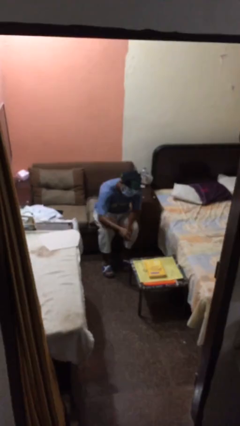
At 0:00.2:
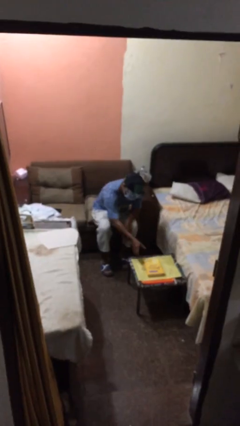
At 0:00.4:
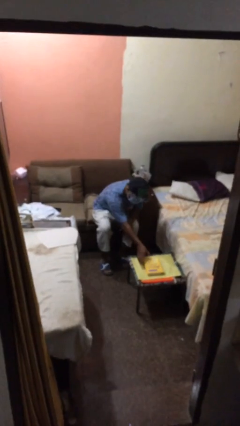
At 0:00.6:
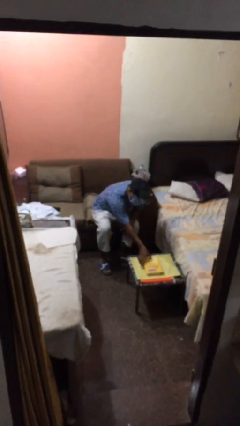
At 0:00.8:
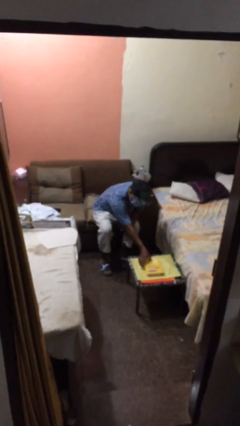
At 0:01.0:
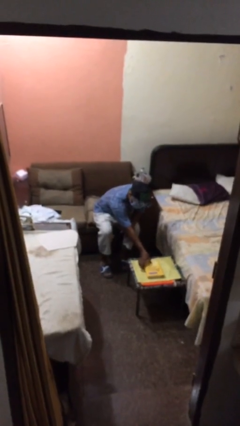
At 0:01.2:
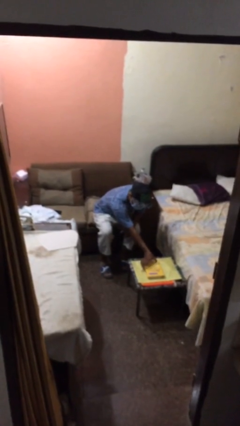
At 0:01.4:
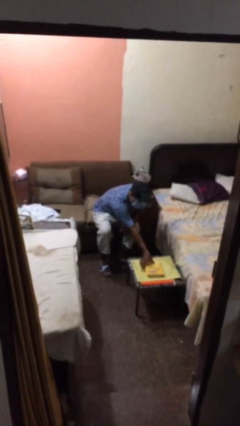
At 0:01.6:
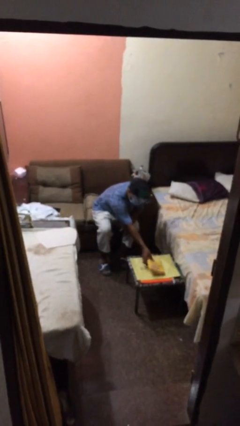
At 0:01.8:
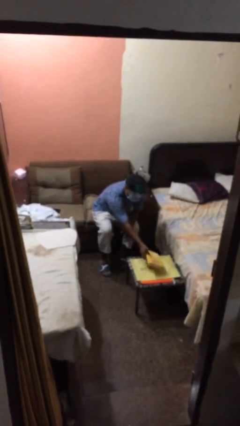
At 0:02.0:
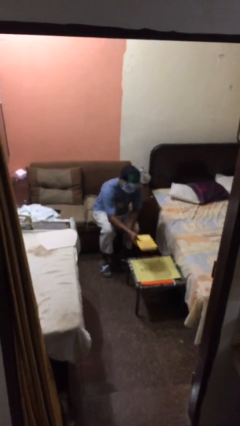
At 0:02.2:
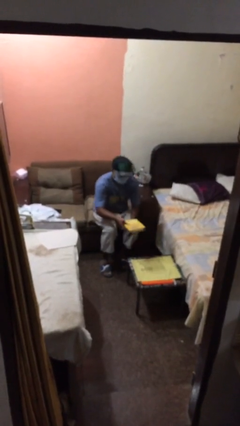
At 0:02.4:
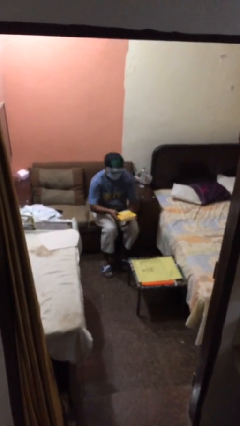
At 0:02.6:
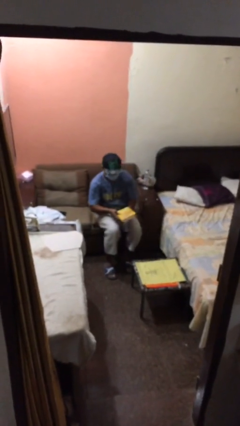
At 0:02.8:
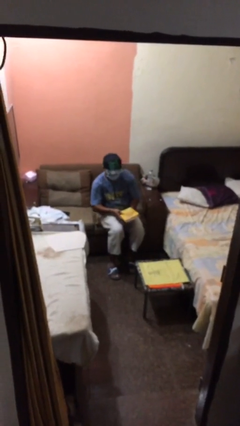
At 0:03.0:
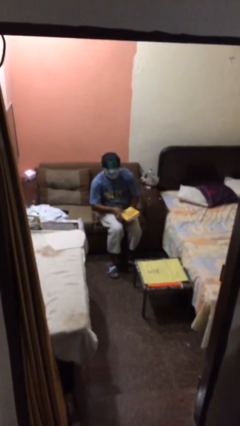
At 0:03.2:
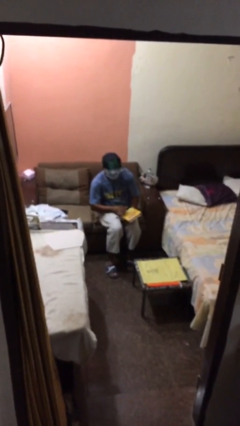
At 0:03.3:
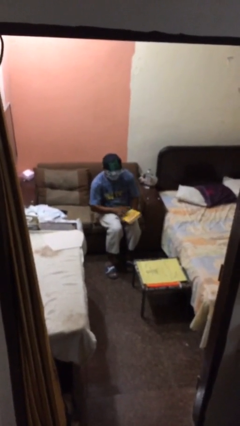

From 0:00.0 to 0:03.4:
person picks up object from table

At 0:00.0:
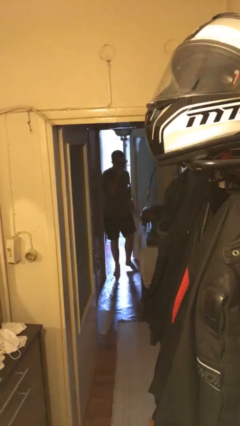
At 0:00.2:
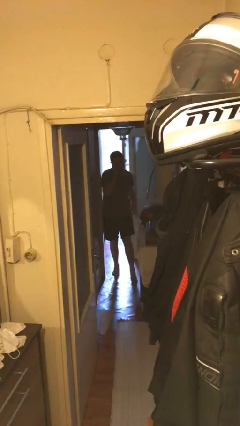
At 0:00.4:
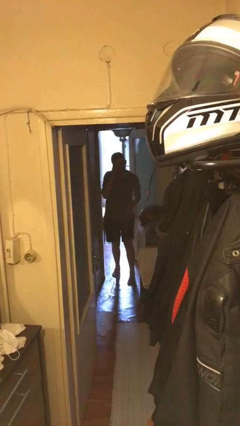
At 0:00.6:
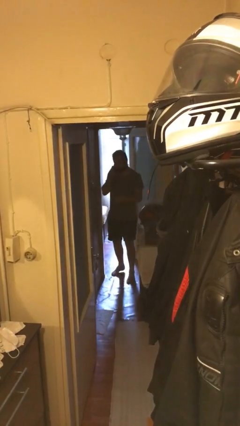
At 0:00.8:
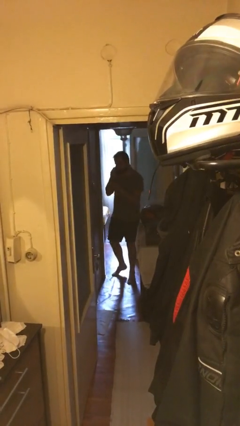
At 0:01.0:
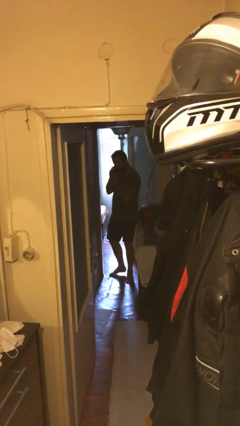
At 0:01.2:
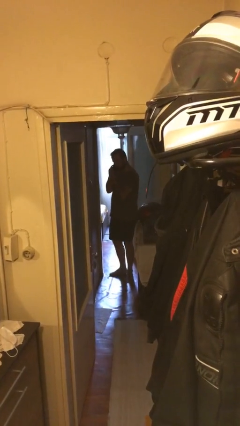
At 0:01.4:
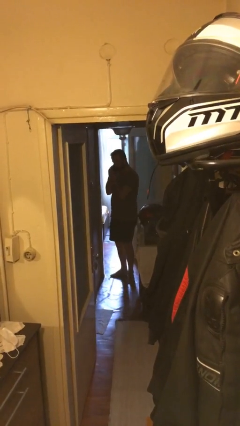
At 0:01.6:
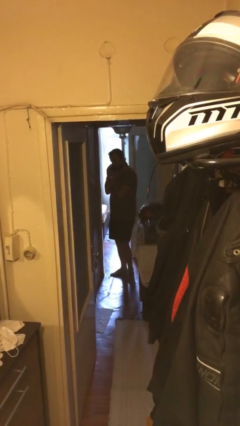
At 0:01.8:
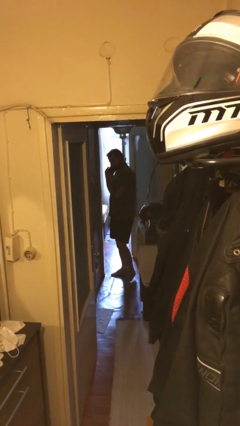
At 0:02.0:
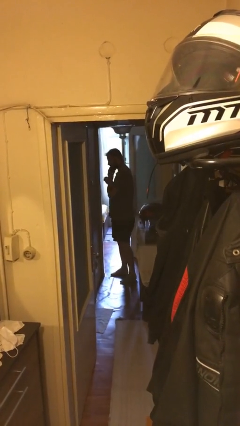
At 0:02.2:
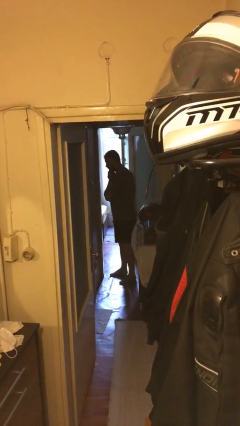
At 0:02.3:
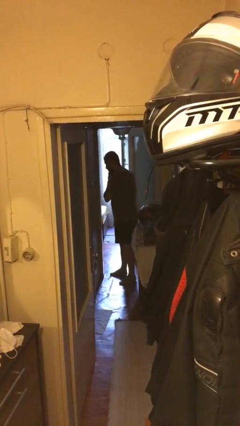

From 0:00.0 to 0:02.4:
person enters scene through structure

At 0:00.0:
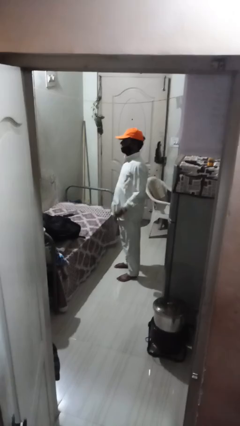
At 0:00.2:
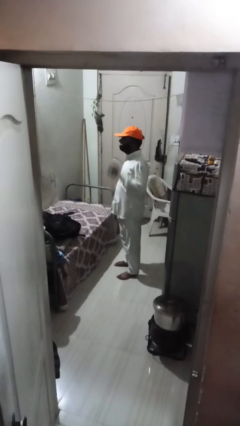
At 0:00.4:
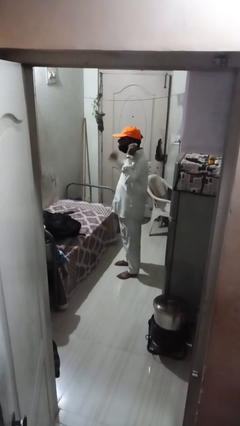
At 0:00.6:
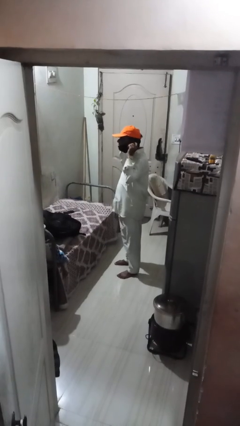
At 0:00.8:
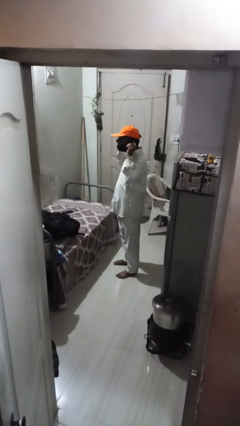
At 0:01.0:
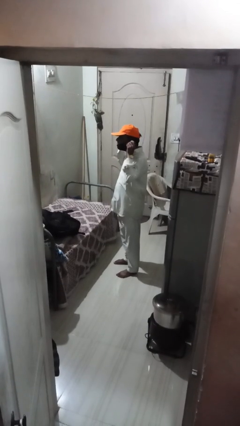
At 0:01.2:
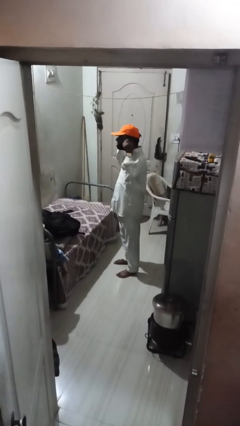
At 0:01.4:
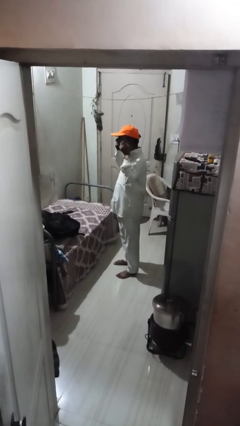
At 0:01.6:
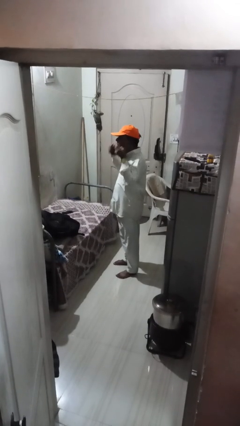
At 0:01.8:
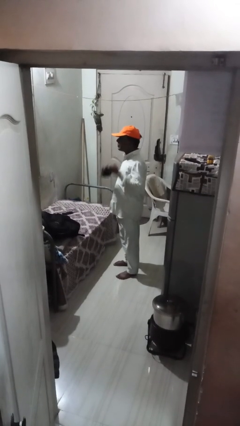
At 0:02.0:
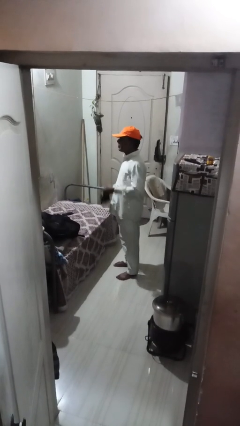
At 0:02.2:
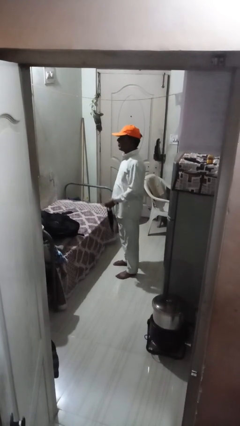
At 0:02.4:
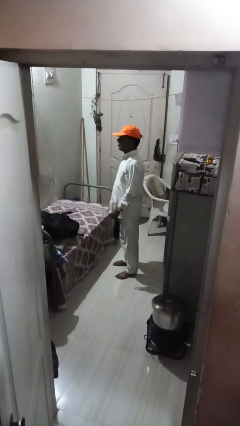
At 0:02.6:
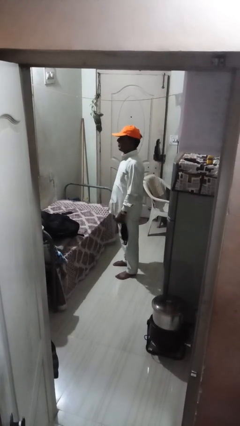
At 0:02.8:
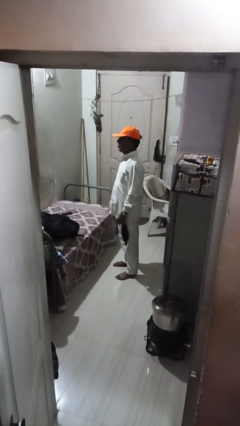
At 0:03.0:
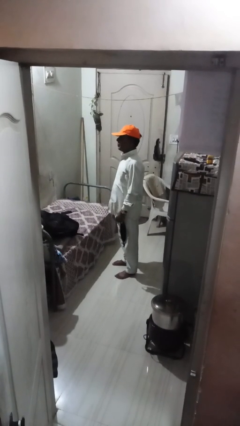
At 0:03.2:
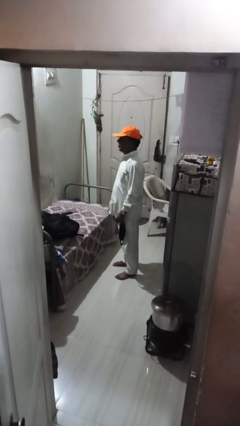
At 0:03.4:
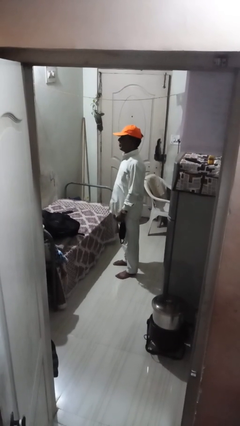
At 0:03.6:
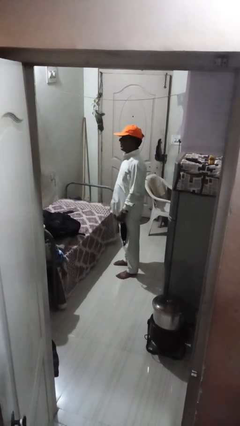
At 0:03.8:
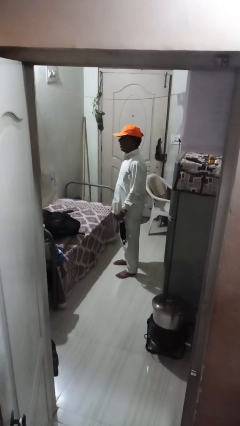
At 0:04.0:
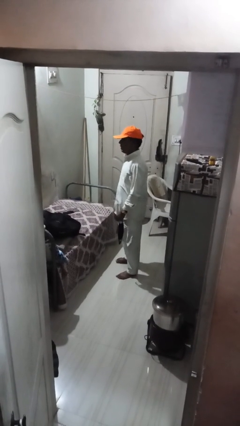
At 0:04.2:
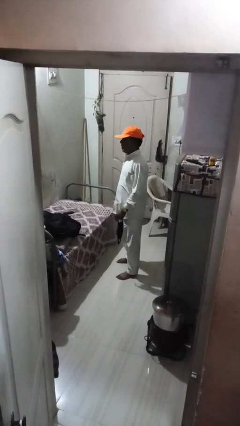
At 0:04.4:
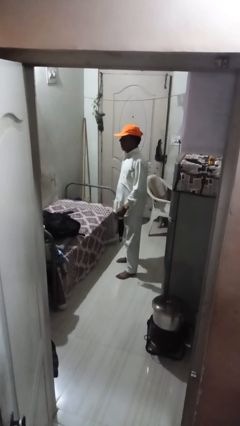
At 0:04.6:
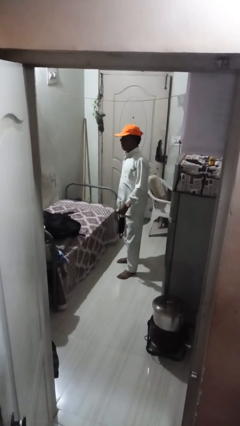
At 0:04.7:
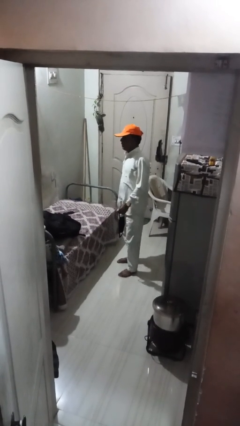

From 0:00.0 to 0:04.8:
person takes off facemask

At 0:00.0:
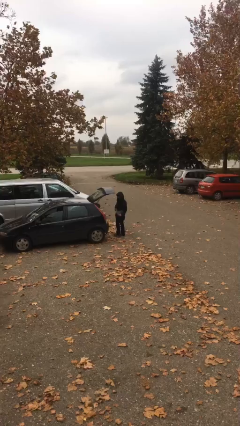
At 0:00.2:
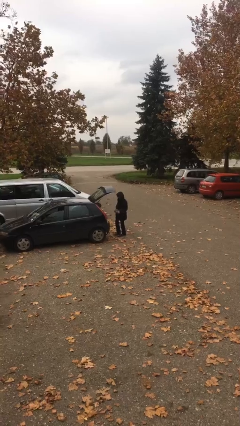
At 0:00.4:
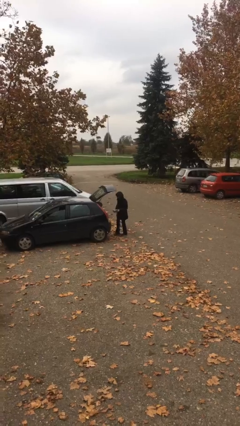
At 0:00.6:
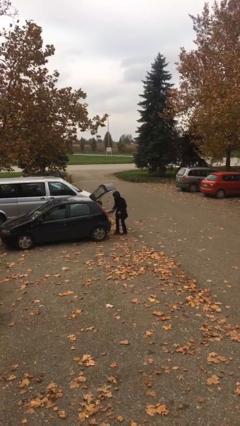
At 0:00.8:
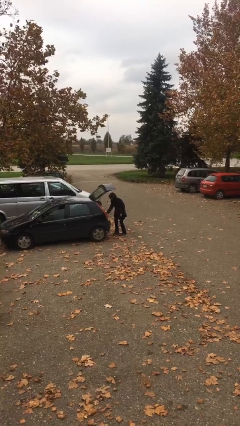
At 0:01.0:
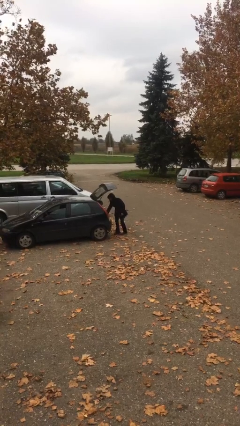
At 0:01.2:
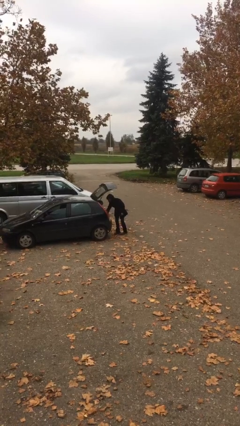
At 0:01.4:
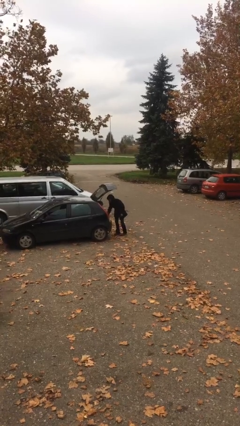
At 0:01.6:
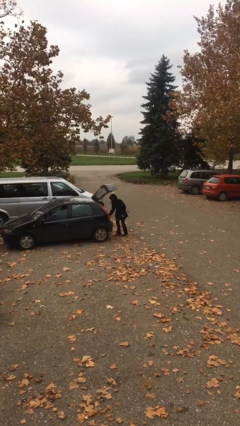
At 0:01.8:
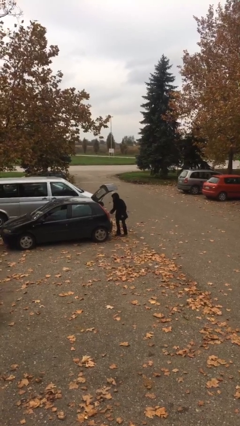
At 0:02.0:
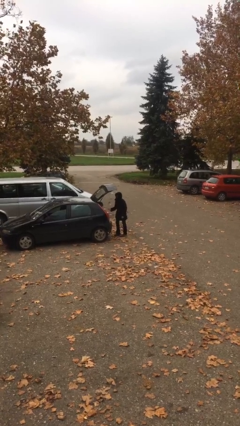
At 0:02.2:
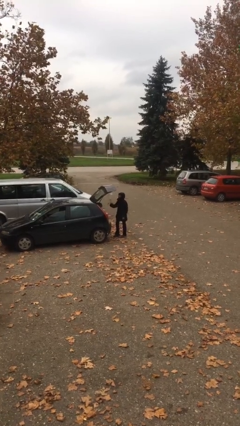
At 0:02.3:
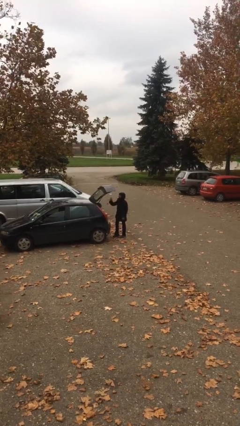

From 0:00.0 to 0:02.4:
person loads car

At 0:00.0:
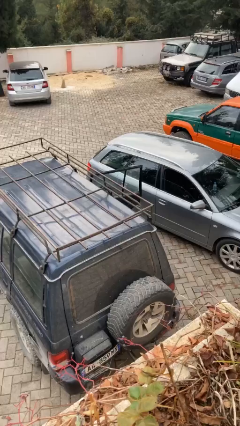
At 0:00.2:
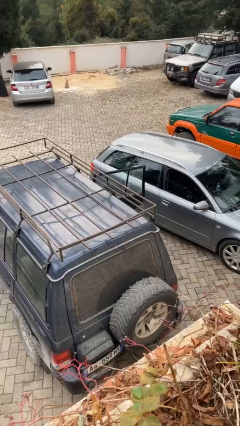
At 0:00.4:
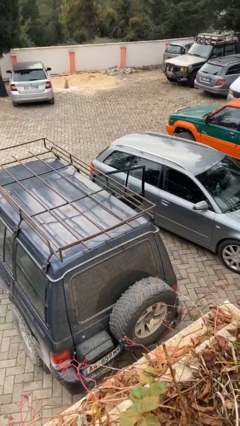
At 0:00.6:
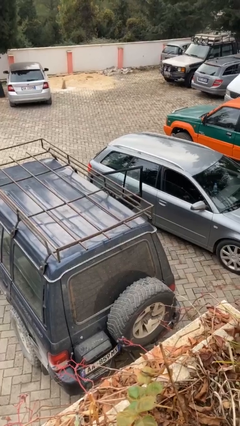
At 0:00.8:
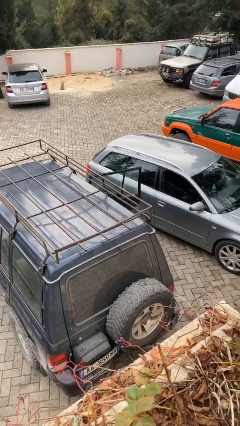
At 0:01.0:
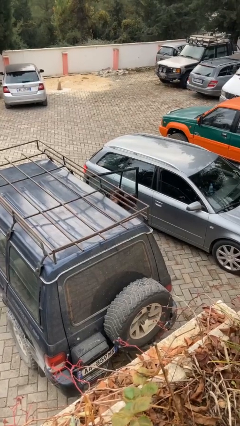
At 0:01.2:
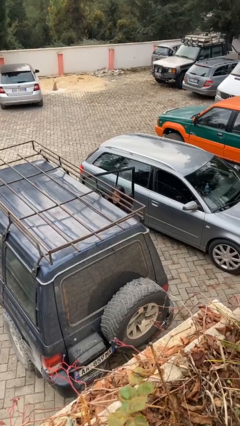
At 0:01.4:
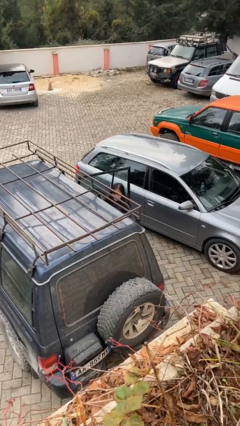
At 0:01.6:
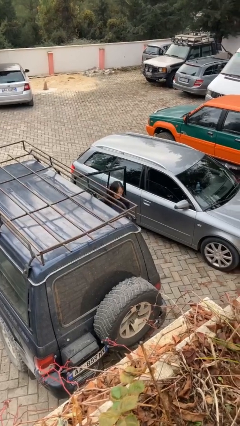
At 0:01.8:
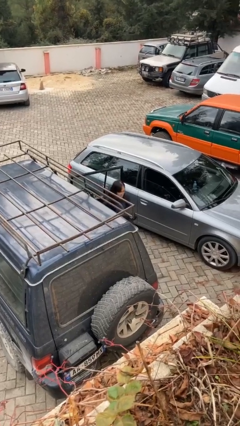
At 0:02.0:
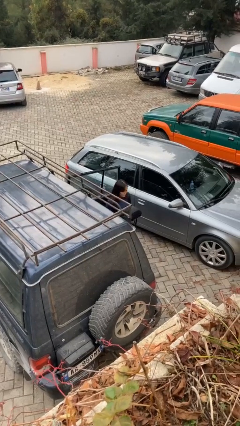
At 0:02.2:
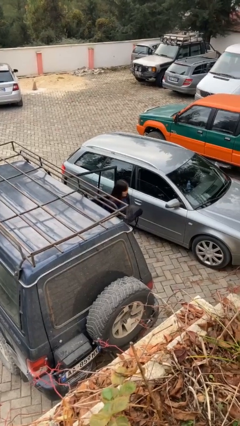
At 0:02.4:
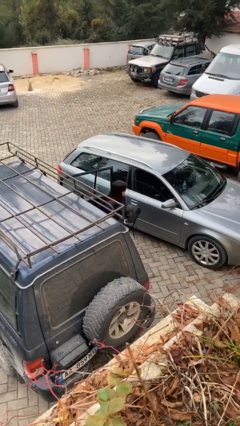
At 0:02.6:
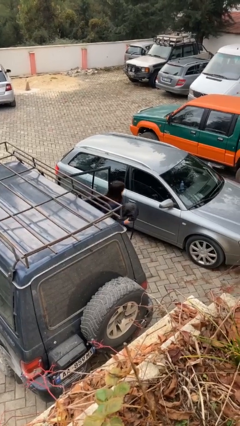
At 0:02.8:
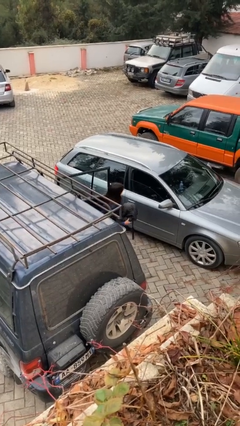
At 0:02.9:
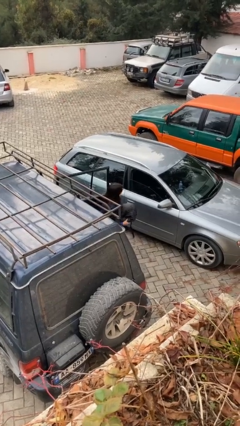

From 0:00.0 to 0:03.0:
person unloads car

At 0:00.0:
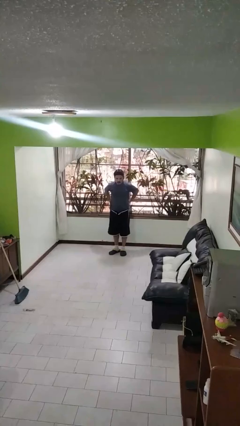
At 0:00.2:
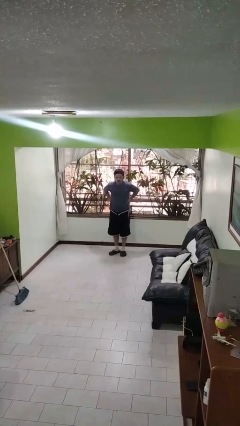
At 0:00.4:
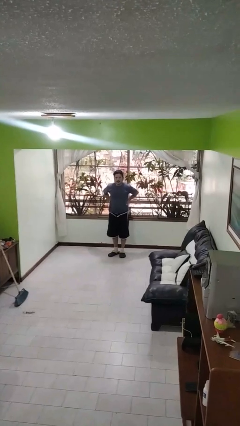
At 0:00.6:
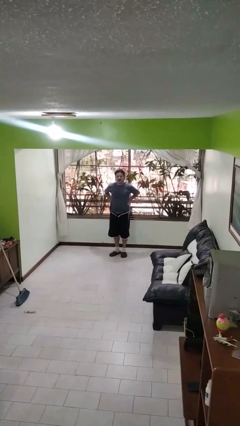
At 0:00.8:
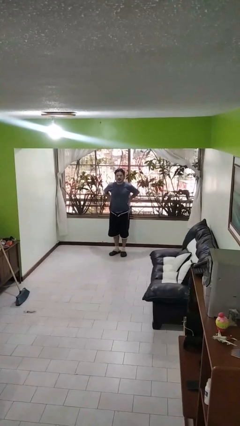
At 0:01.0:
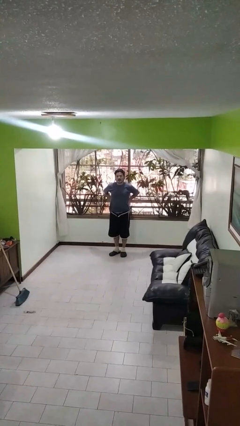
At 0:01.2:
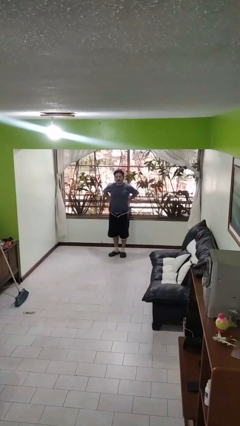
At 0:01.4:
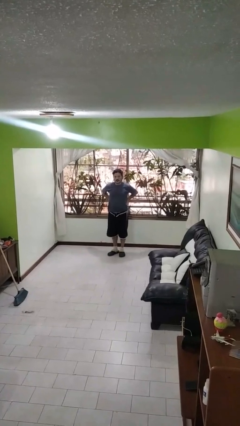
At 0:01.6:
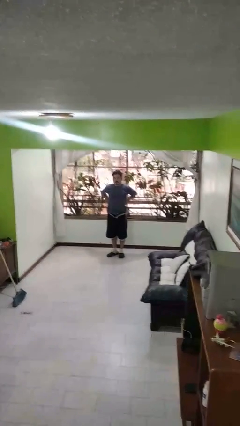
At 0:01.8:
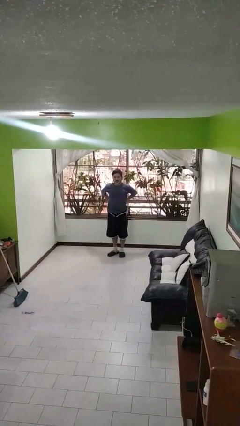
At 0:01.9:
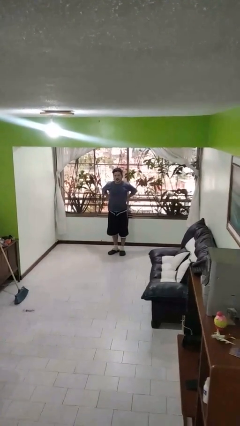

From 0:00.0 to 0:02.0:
person stretches back
